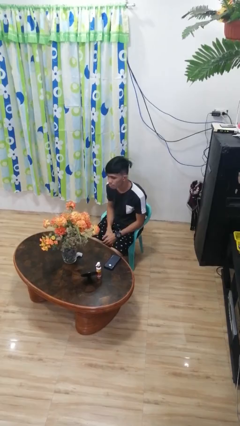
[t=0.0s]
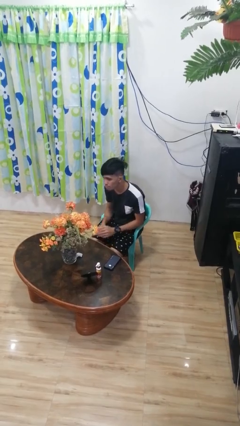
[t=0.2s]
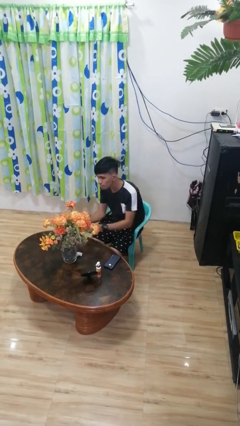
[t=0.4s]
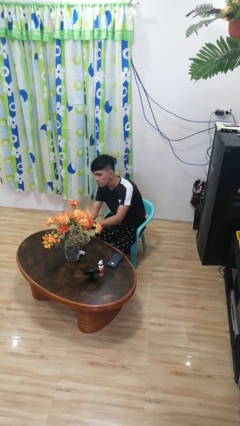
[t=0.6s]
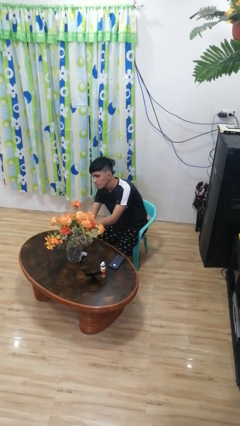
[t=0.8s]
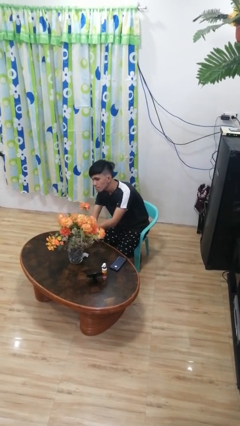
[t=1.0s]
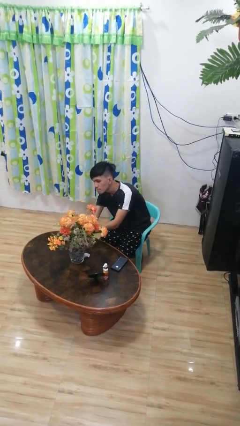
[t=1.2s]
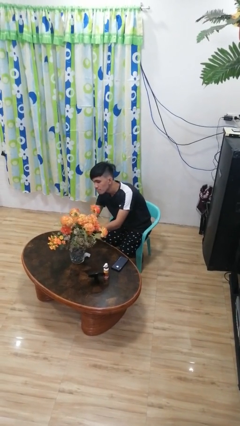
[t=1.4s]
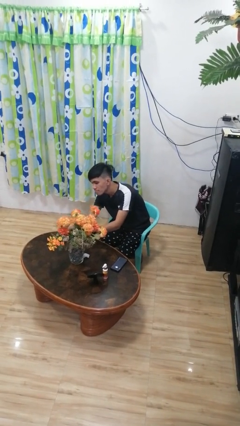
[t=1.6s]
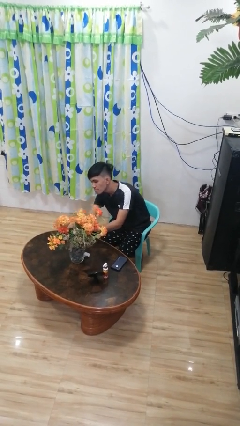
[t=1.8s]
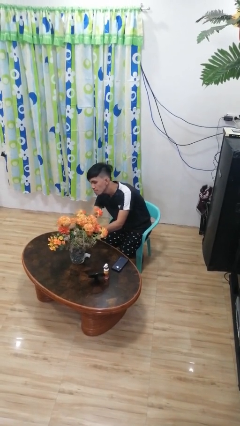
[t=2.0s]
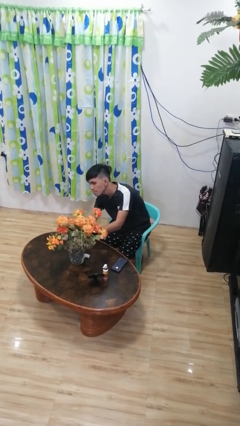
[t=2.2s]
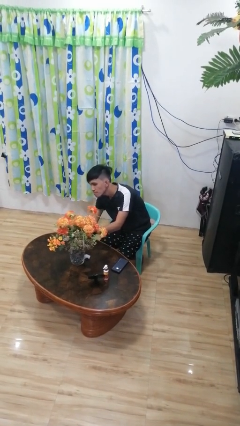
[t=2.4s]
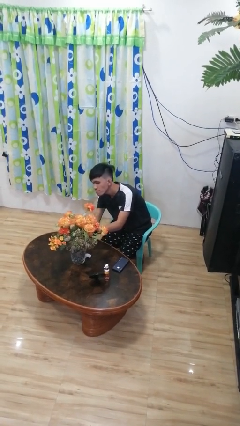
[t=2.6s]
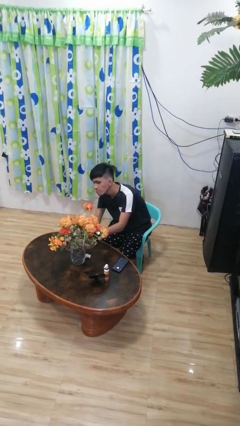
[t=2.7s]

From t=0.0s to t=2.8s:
person arranges flowers in vase

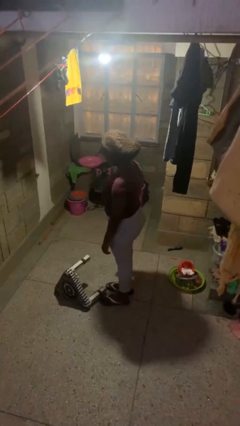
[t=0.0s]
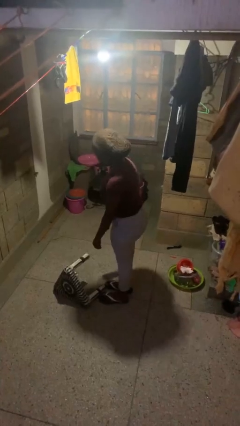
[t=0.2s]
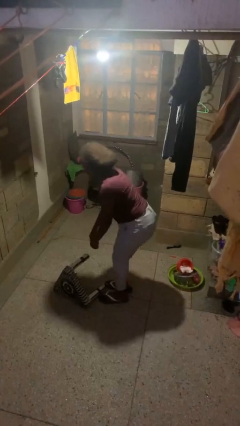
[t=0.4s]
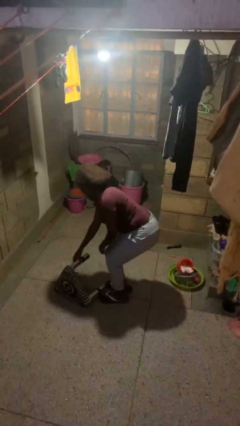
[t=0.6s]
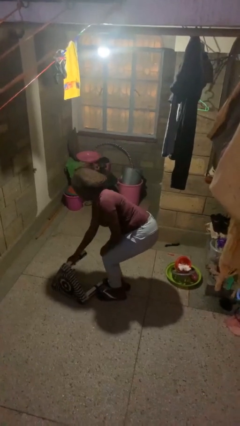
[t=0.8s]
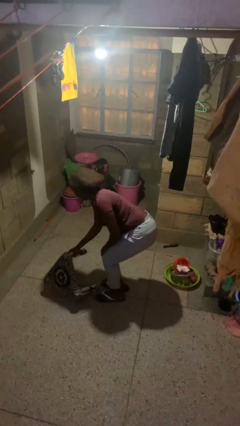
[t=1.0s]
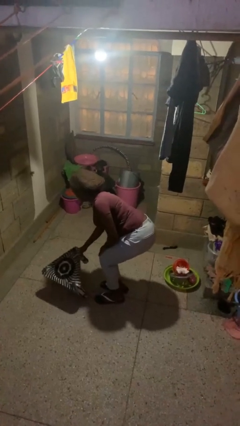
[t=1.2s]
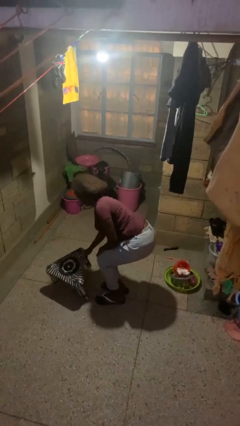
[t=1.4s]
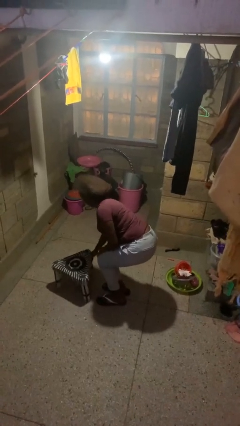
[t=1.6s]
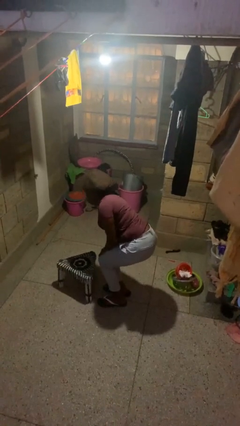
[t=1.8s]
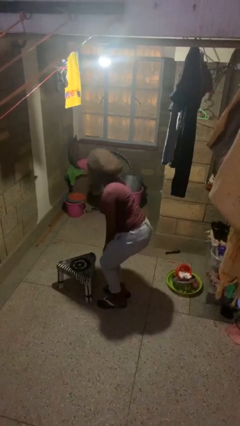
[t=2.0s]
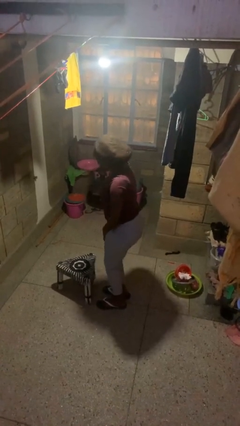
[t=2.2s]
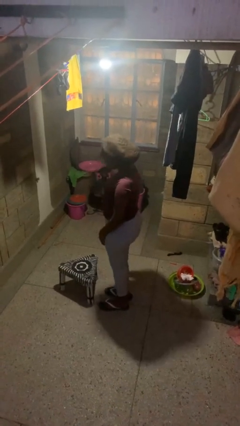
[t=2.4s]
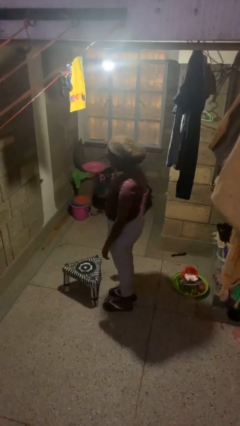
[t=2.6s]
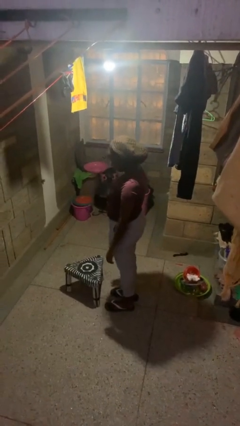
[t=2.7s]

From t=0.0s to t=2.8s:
person sets upright furniture

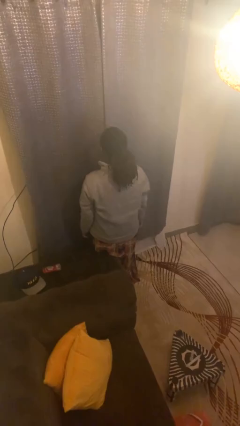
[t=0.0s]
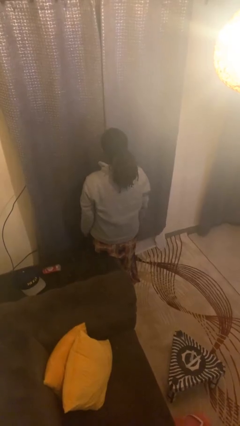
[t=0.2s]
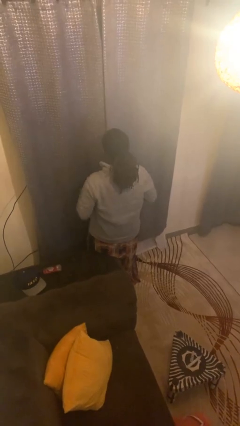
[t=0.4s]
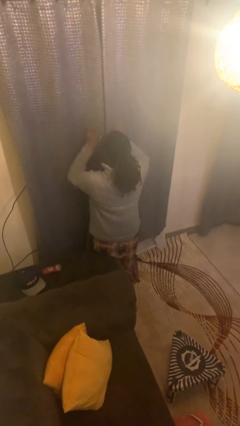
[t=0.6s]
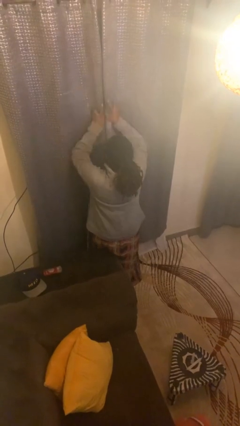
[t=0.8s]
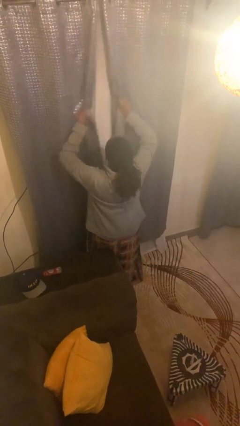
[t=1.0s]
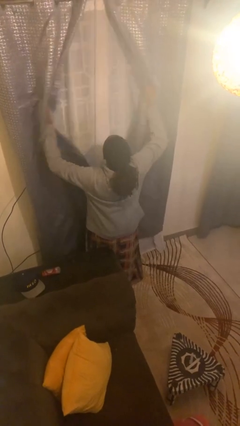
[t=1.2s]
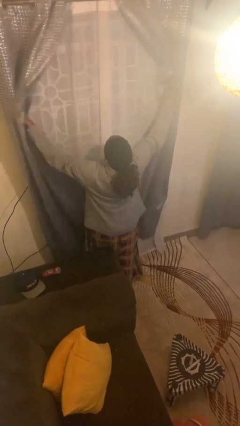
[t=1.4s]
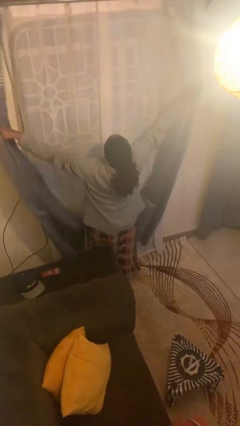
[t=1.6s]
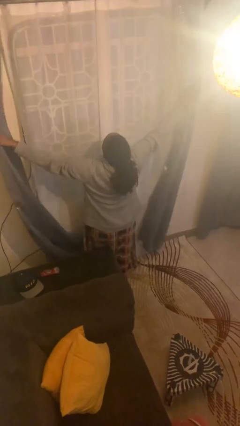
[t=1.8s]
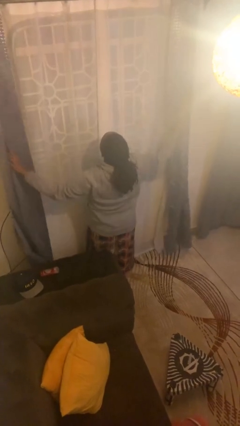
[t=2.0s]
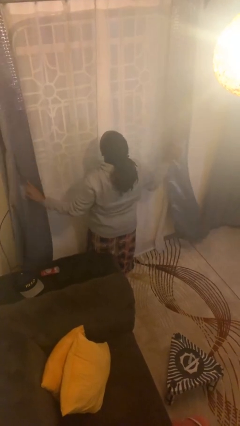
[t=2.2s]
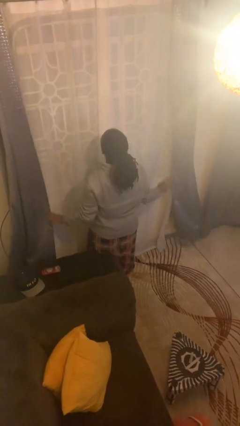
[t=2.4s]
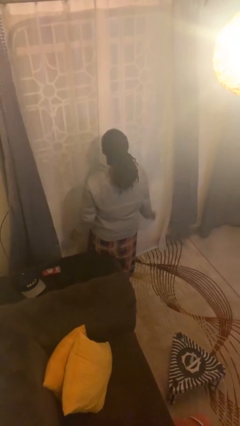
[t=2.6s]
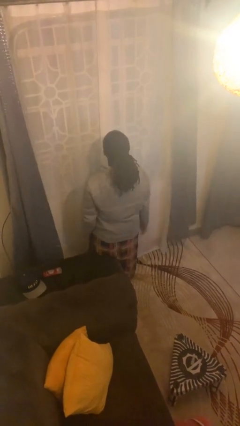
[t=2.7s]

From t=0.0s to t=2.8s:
person opens curtains

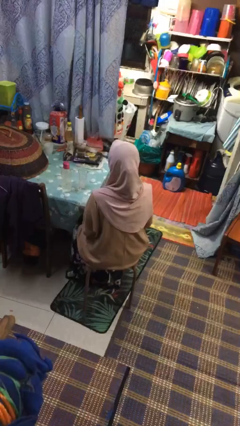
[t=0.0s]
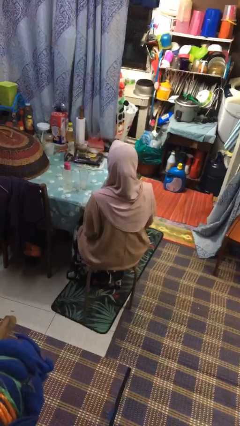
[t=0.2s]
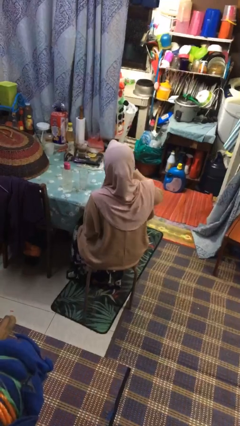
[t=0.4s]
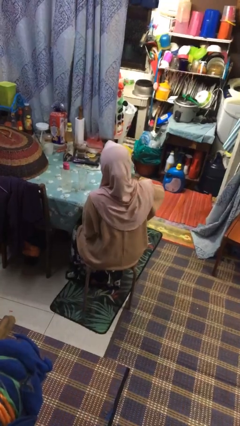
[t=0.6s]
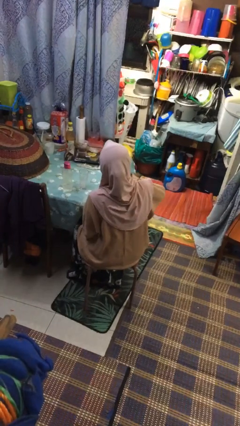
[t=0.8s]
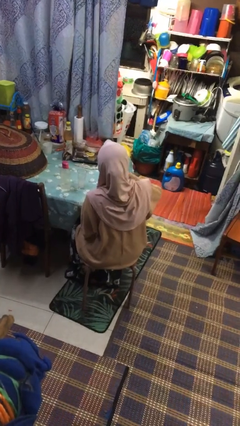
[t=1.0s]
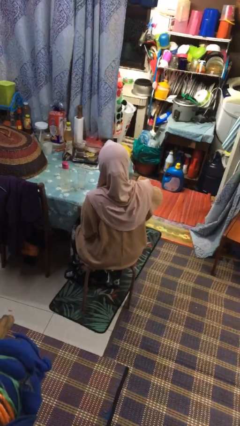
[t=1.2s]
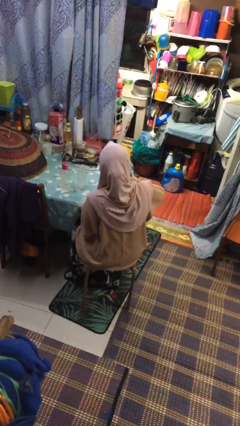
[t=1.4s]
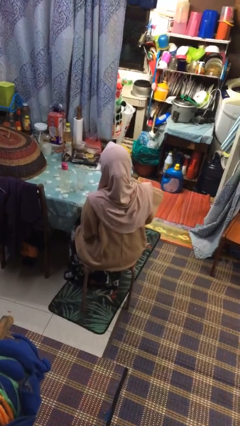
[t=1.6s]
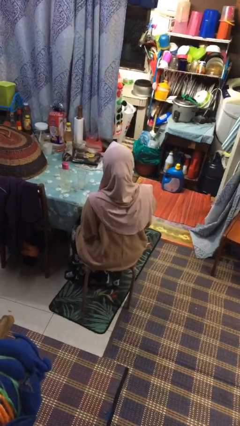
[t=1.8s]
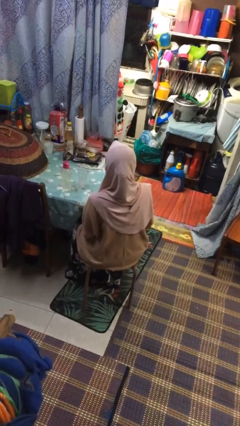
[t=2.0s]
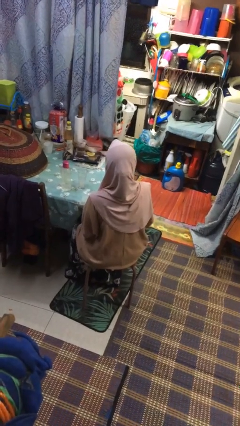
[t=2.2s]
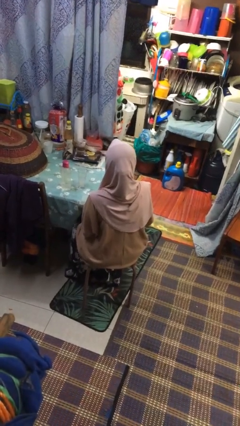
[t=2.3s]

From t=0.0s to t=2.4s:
person drums on chest

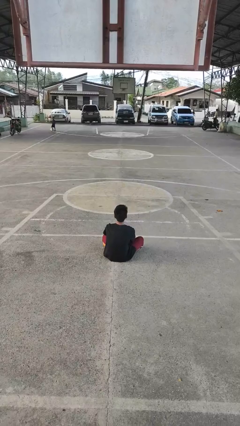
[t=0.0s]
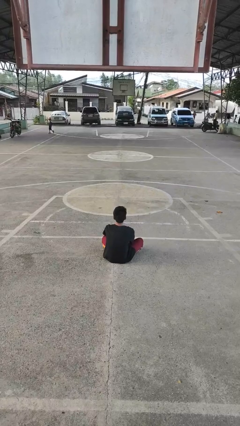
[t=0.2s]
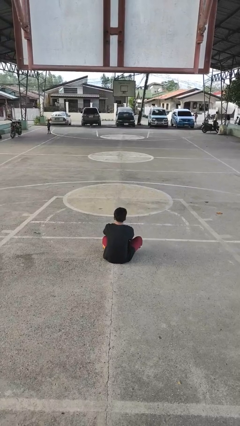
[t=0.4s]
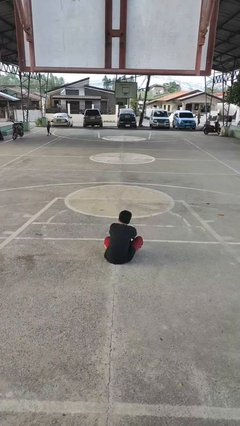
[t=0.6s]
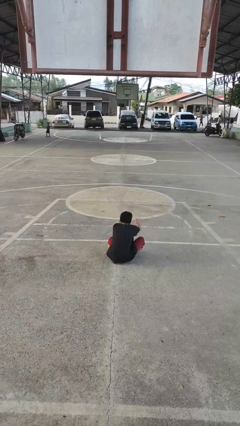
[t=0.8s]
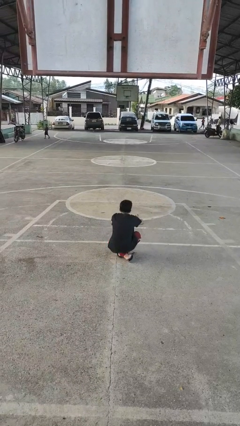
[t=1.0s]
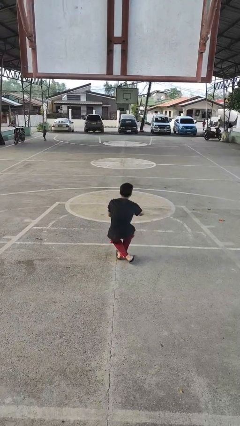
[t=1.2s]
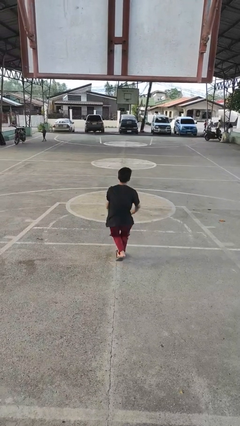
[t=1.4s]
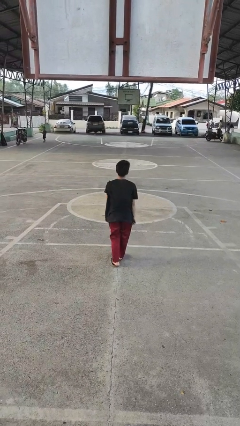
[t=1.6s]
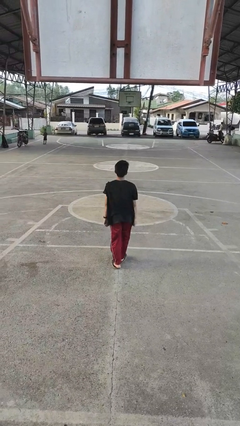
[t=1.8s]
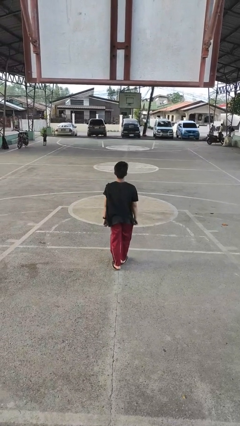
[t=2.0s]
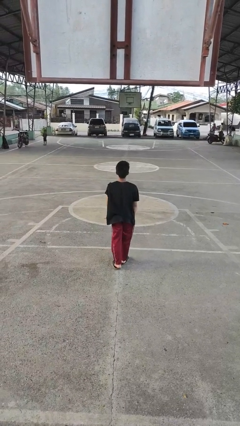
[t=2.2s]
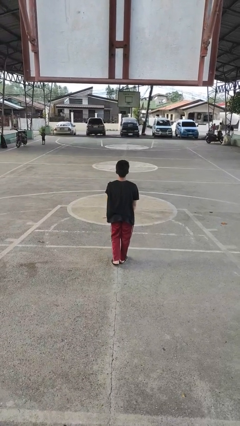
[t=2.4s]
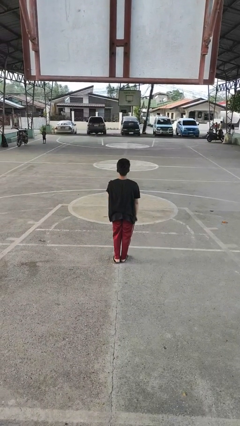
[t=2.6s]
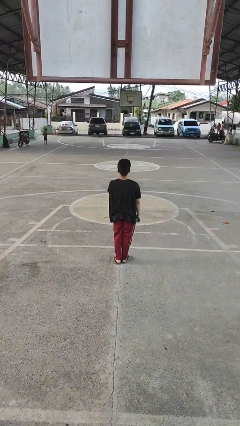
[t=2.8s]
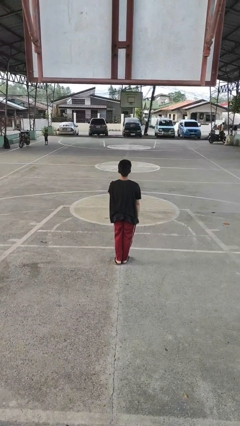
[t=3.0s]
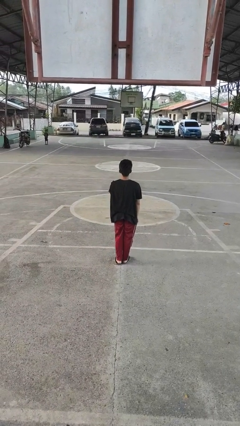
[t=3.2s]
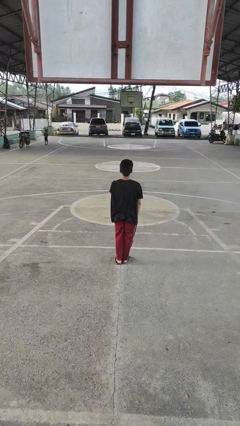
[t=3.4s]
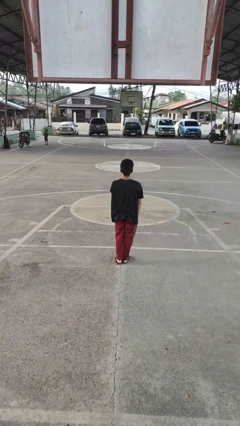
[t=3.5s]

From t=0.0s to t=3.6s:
person stands up from floor

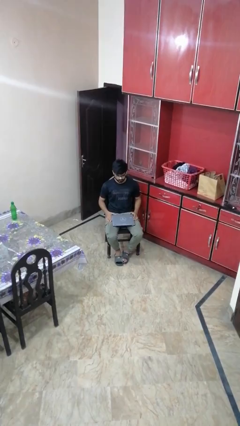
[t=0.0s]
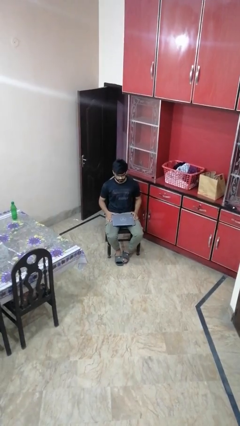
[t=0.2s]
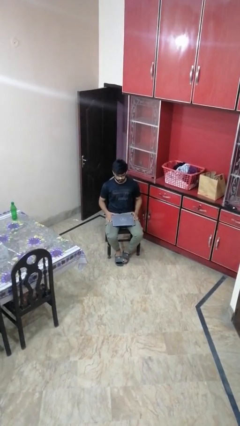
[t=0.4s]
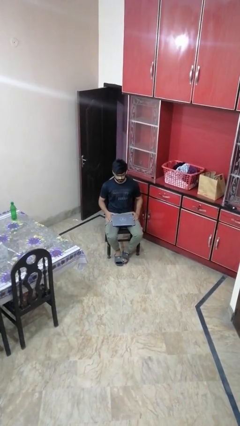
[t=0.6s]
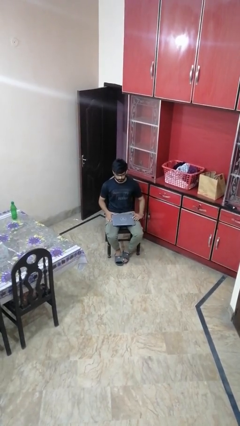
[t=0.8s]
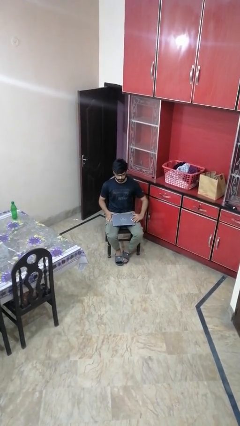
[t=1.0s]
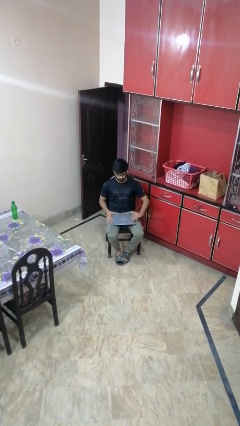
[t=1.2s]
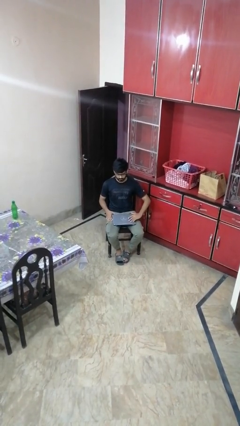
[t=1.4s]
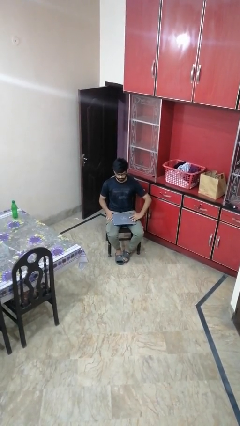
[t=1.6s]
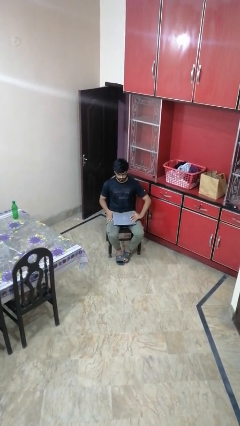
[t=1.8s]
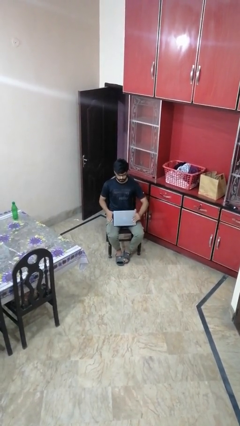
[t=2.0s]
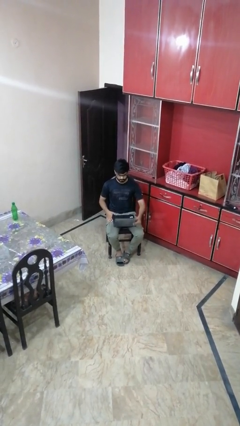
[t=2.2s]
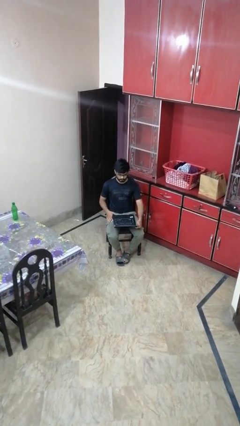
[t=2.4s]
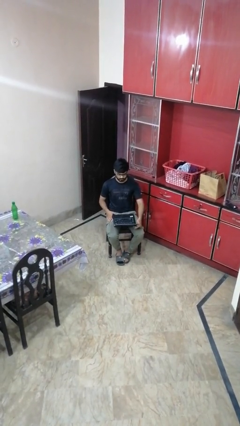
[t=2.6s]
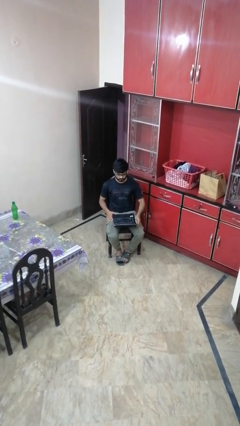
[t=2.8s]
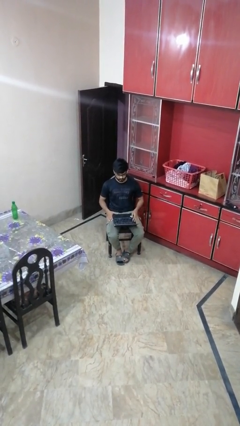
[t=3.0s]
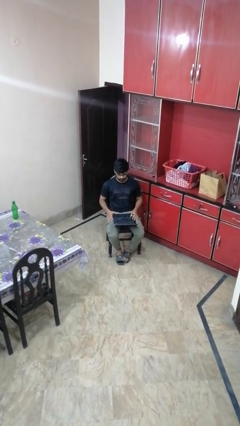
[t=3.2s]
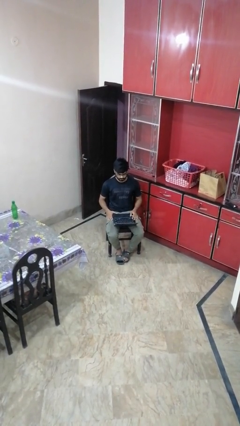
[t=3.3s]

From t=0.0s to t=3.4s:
person opens laptop
